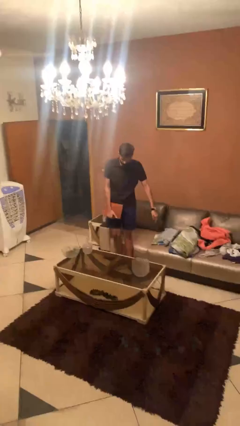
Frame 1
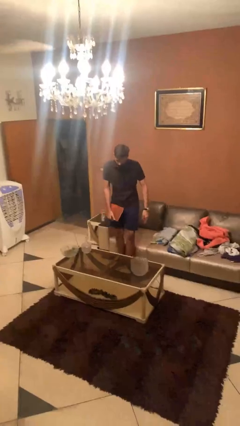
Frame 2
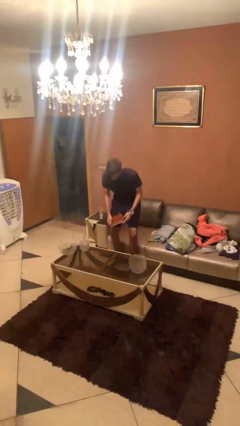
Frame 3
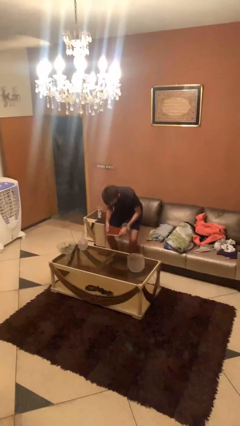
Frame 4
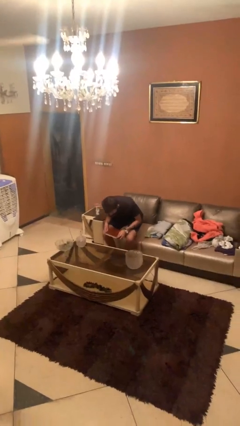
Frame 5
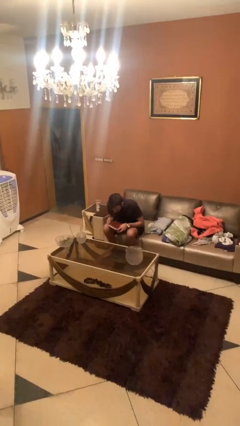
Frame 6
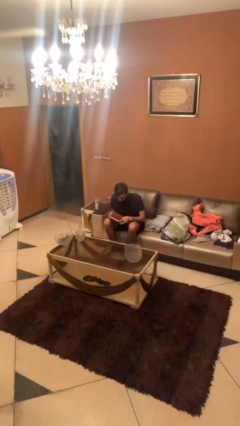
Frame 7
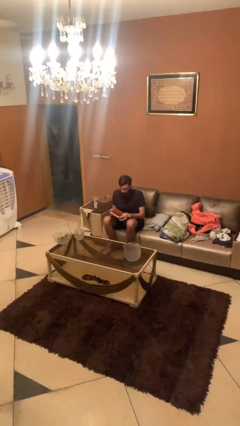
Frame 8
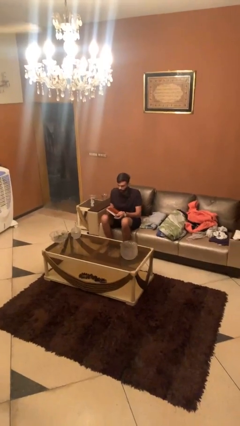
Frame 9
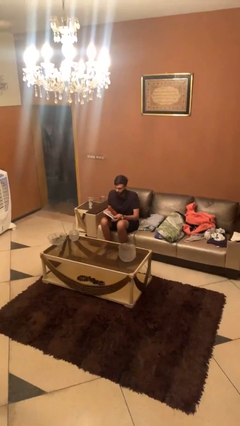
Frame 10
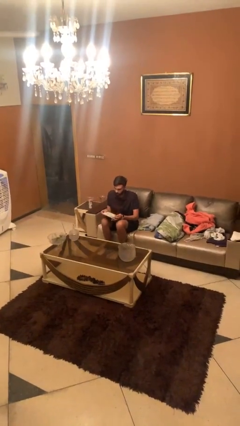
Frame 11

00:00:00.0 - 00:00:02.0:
person sits down

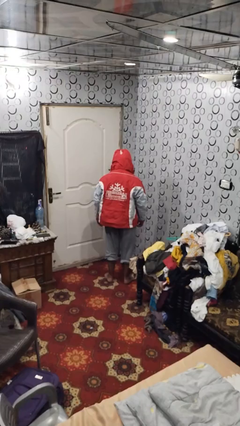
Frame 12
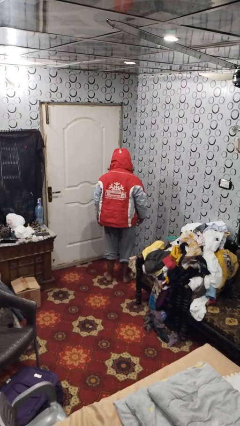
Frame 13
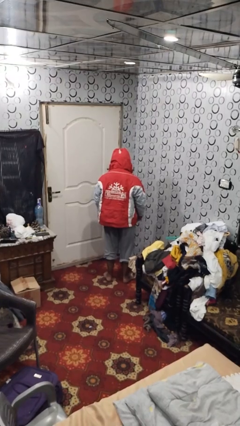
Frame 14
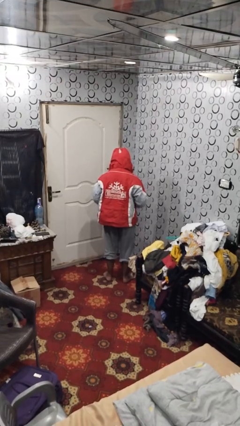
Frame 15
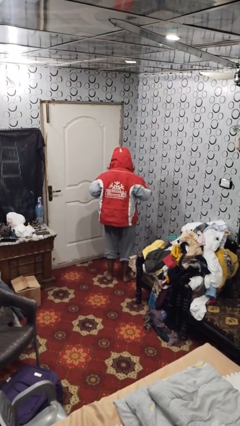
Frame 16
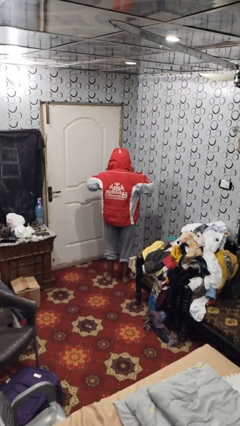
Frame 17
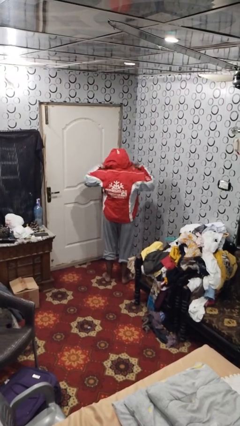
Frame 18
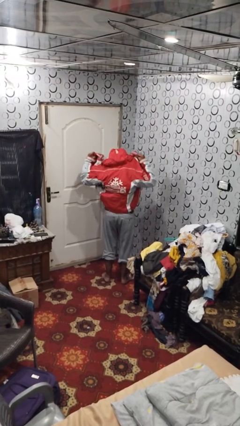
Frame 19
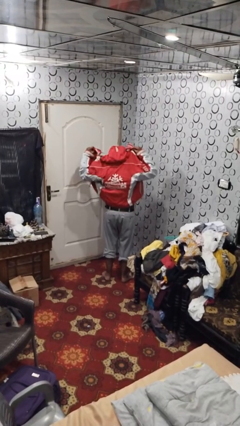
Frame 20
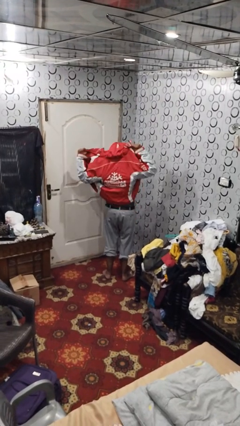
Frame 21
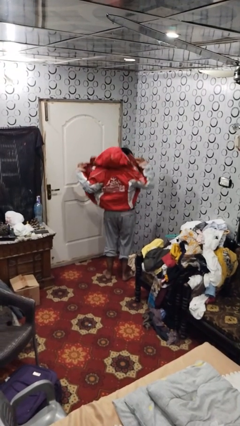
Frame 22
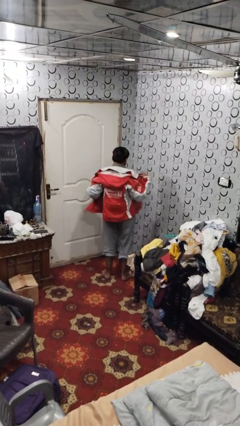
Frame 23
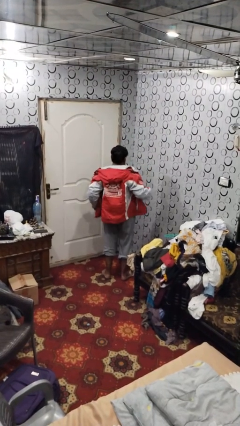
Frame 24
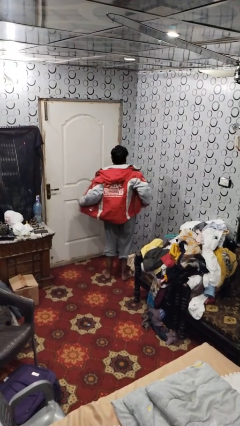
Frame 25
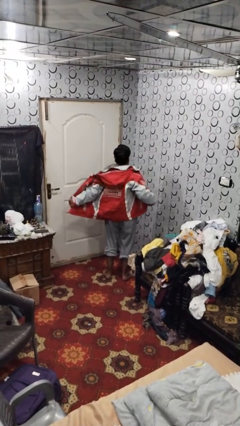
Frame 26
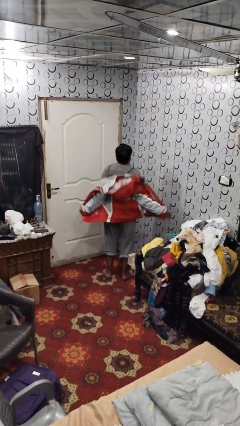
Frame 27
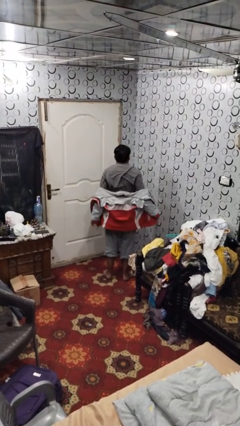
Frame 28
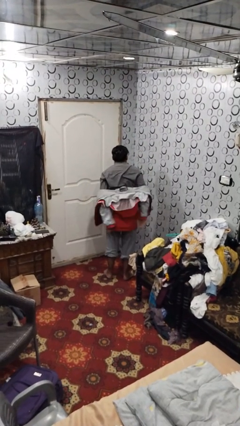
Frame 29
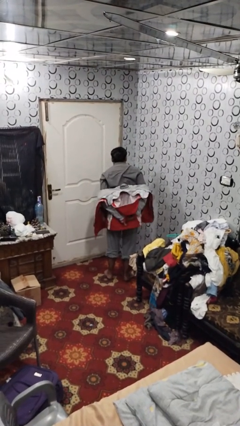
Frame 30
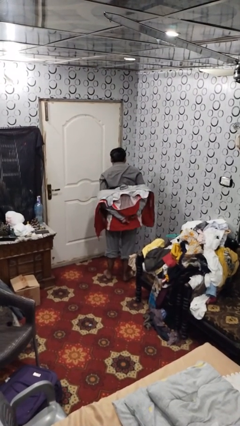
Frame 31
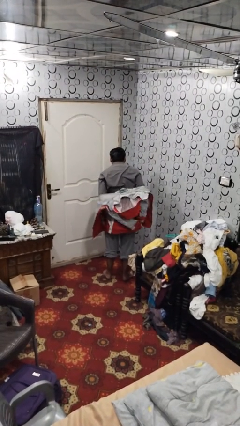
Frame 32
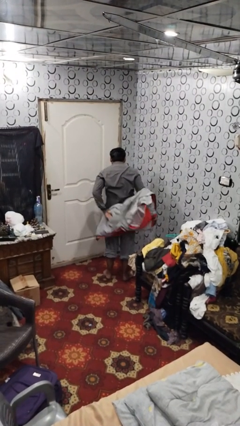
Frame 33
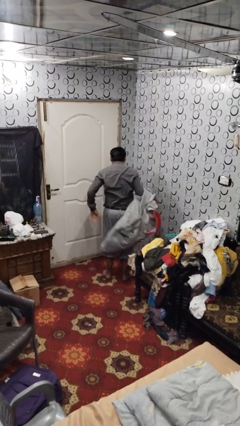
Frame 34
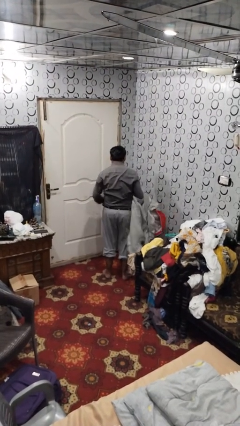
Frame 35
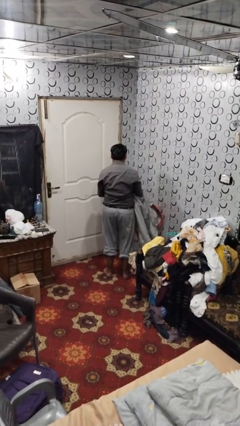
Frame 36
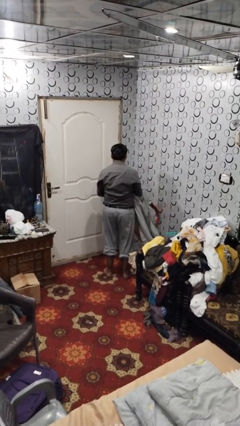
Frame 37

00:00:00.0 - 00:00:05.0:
person takes off hoodie

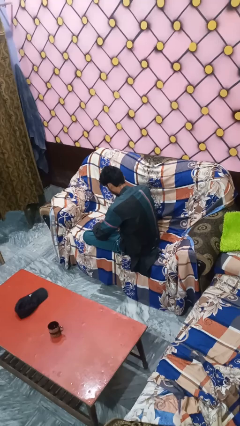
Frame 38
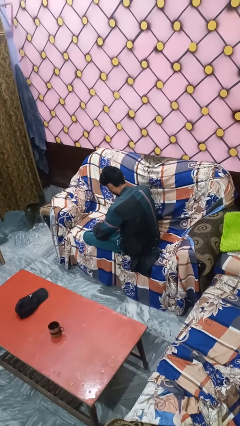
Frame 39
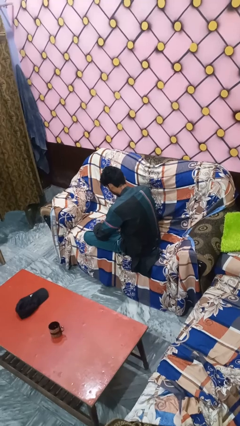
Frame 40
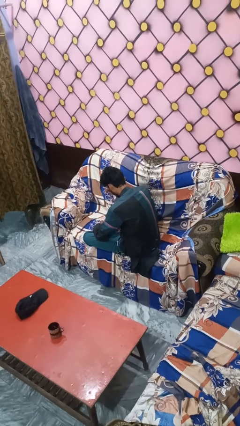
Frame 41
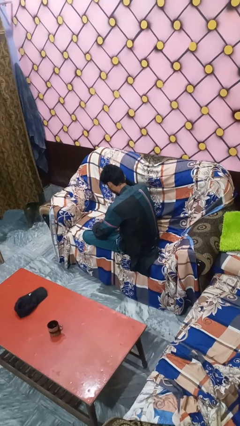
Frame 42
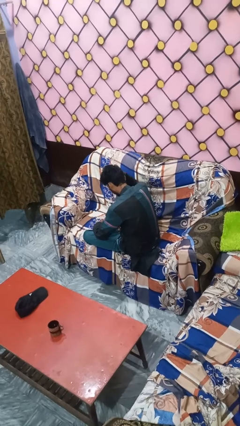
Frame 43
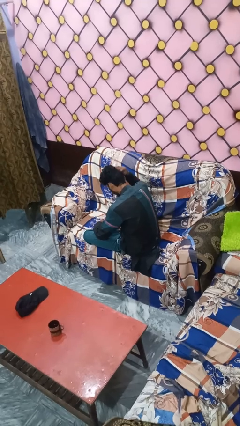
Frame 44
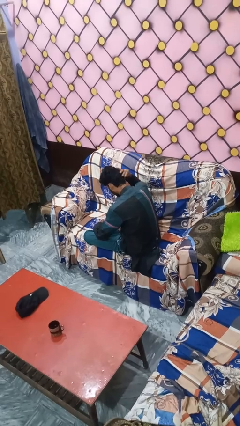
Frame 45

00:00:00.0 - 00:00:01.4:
person pats head

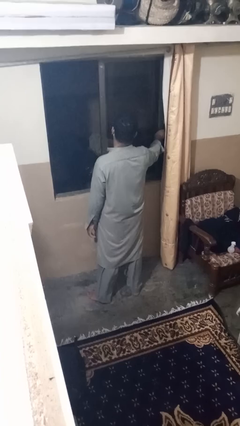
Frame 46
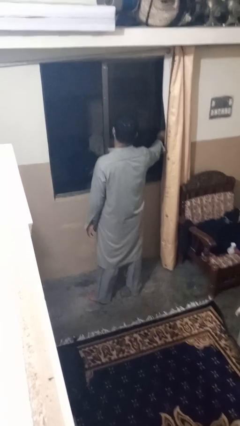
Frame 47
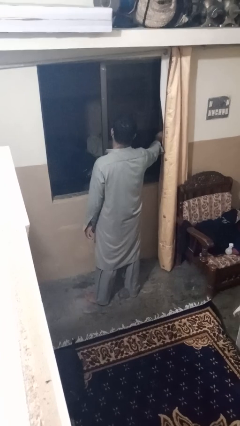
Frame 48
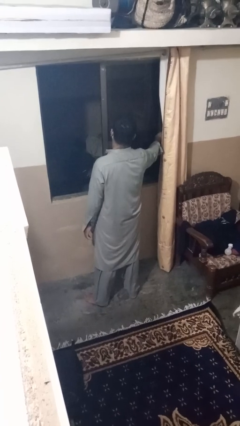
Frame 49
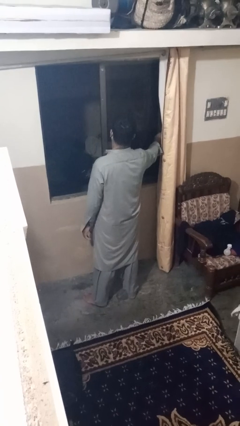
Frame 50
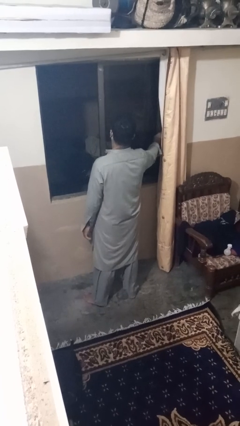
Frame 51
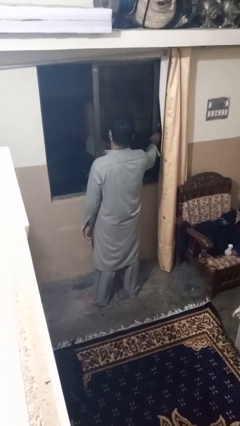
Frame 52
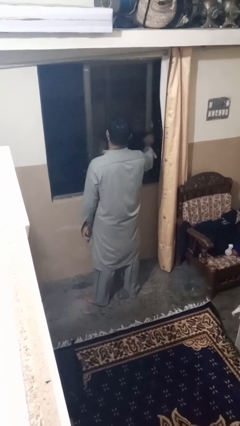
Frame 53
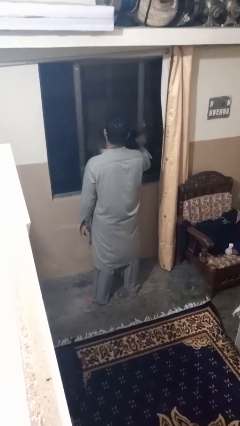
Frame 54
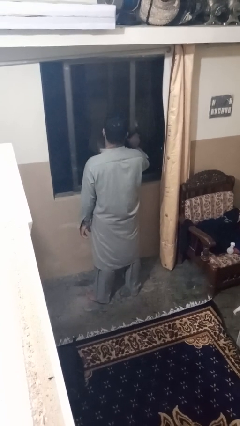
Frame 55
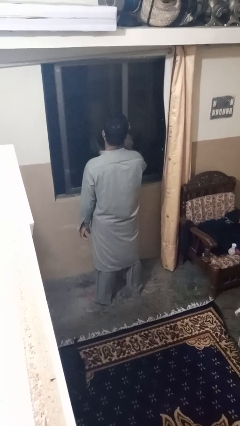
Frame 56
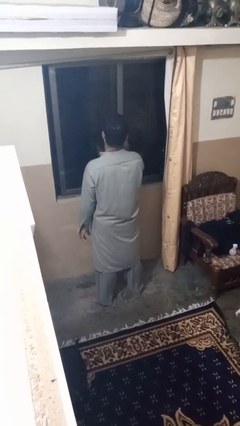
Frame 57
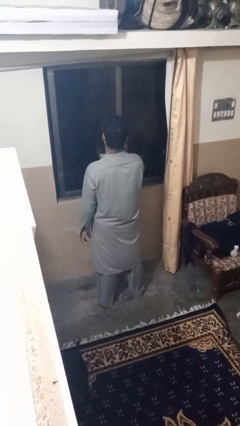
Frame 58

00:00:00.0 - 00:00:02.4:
person closes home window

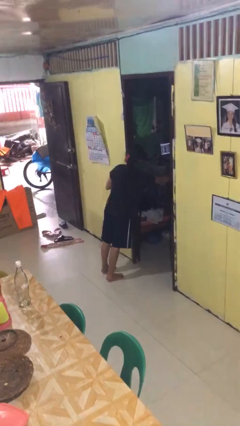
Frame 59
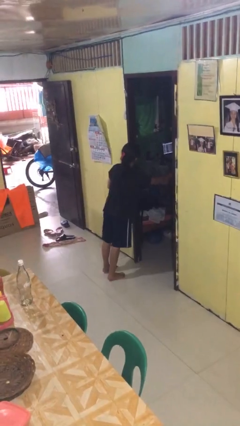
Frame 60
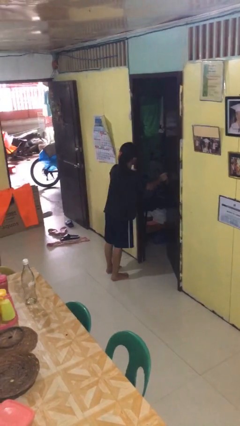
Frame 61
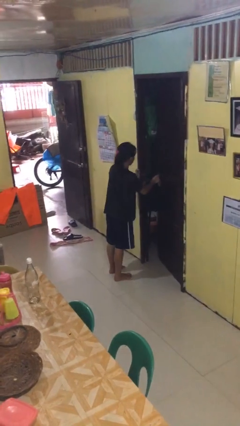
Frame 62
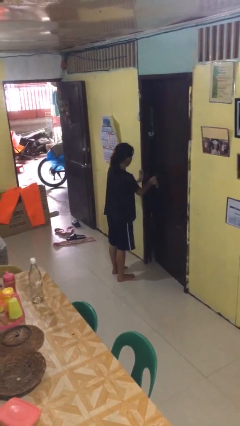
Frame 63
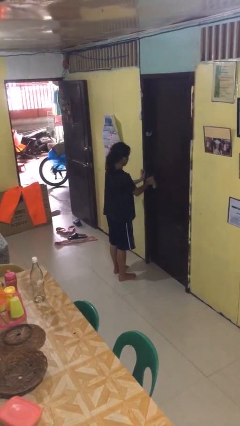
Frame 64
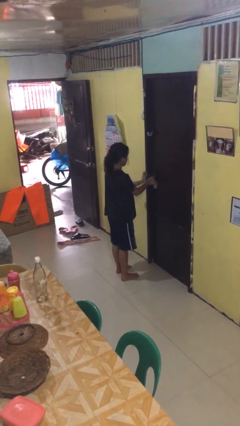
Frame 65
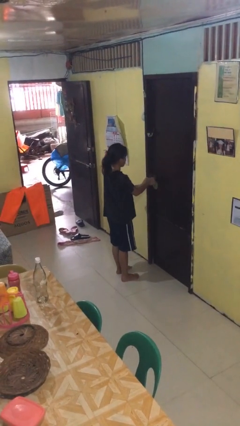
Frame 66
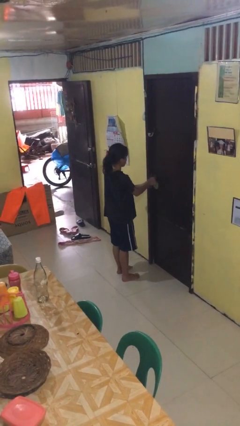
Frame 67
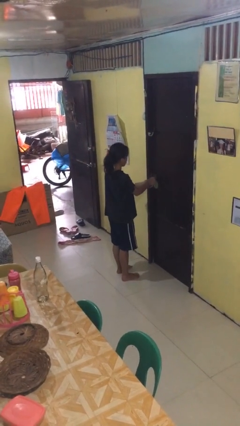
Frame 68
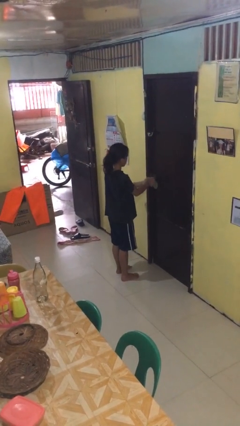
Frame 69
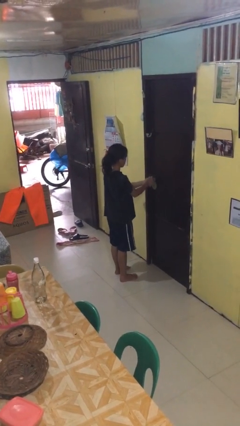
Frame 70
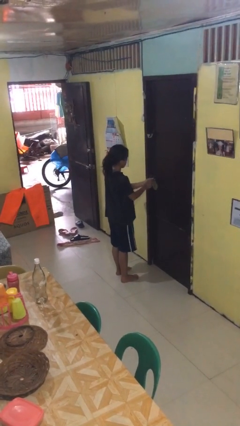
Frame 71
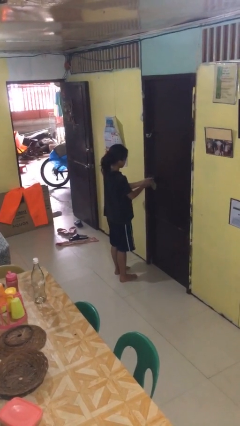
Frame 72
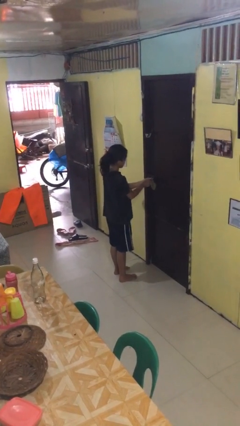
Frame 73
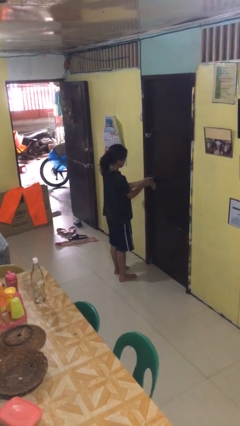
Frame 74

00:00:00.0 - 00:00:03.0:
person closes facility door

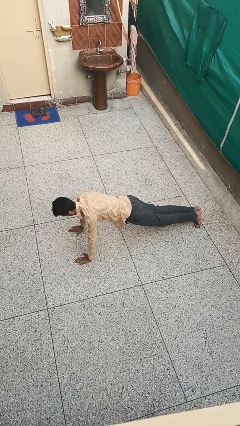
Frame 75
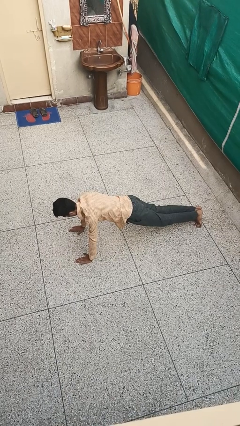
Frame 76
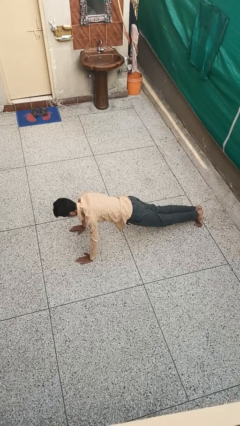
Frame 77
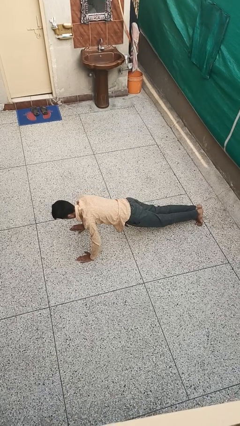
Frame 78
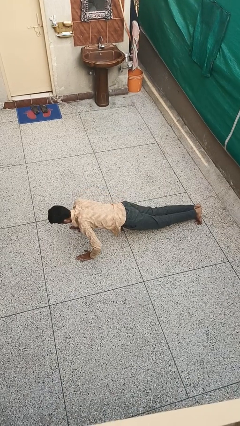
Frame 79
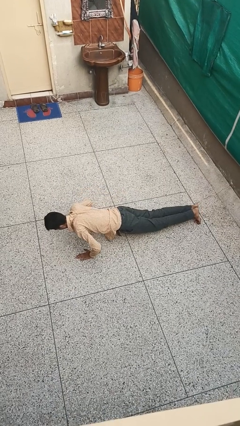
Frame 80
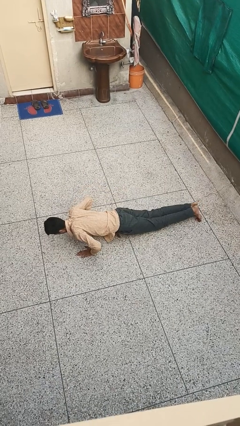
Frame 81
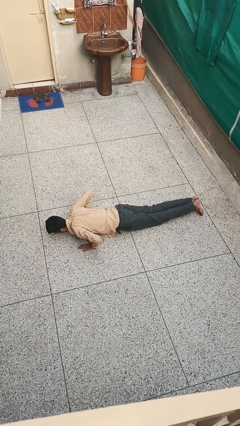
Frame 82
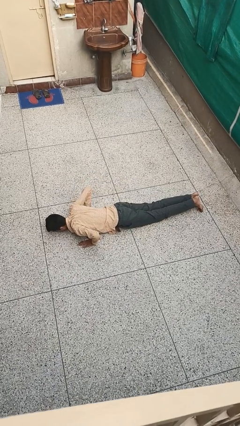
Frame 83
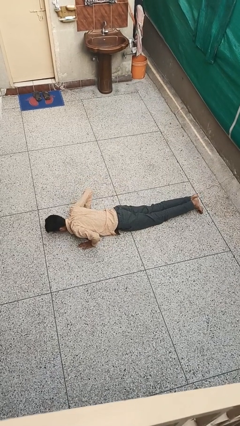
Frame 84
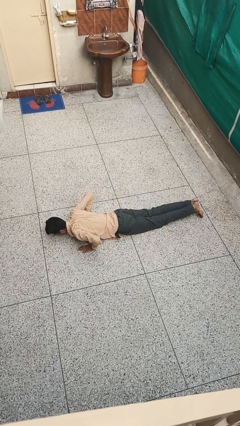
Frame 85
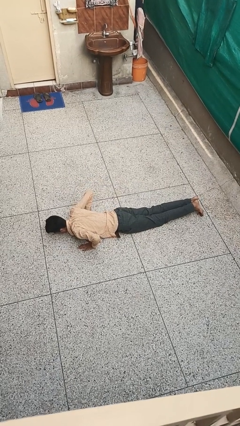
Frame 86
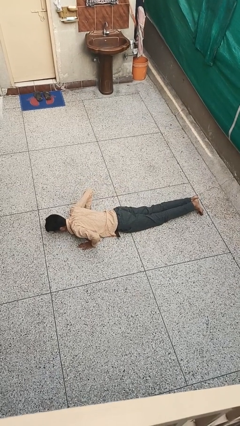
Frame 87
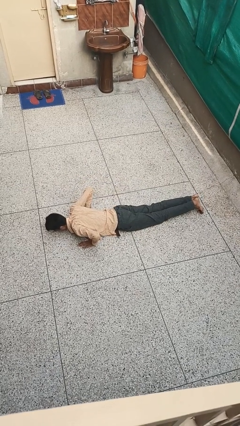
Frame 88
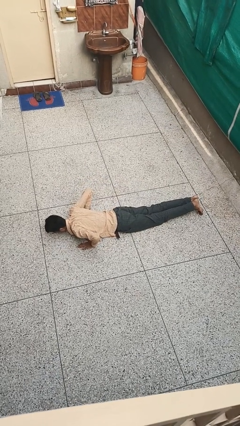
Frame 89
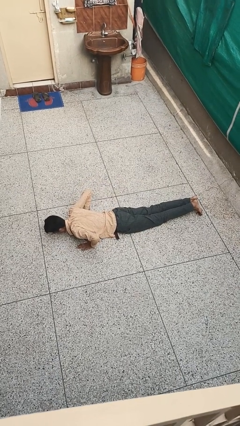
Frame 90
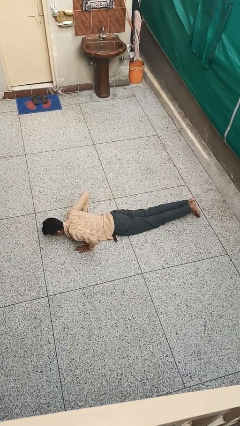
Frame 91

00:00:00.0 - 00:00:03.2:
person exercises with pushup

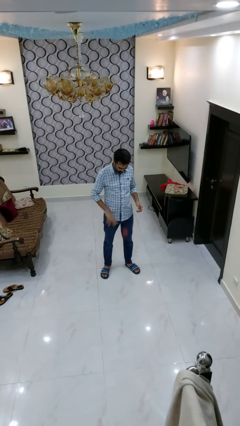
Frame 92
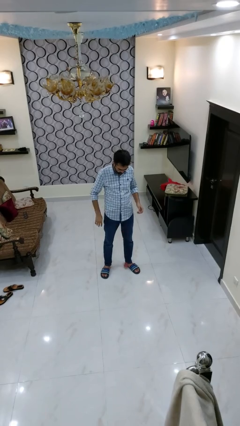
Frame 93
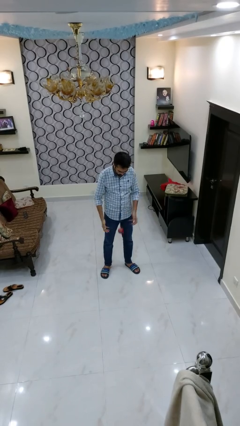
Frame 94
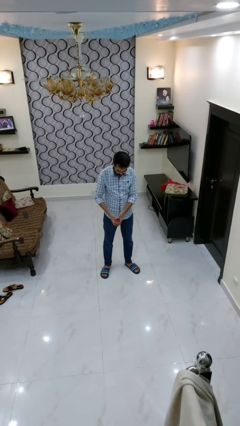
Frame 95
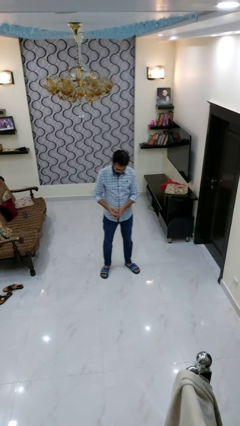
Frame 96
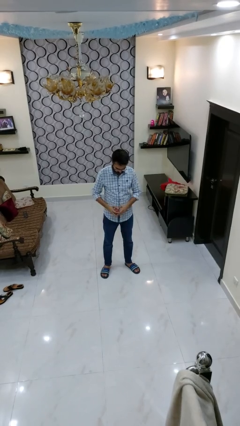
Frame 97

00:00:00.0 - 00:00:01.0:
person bounces ball on floor
